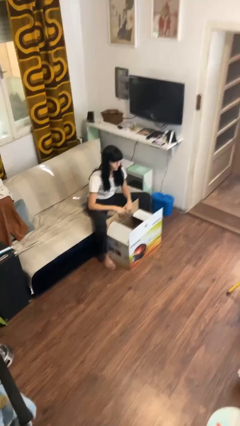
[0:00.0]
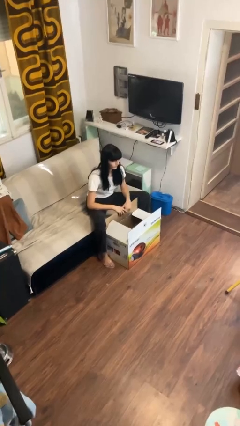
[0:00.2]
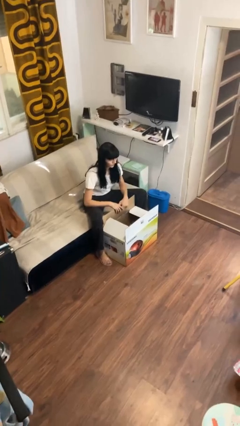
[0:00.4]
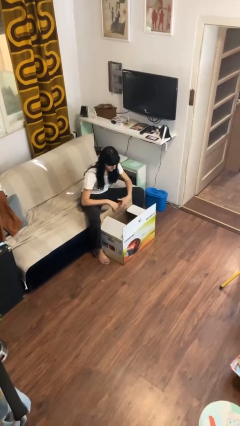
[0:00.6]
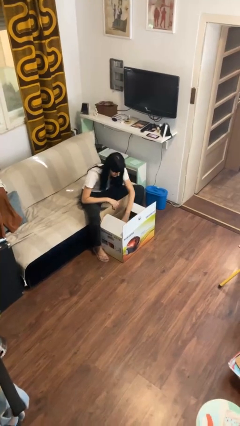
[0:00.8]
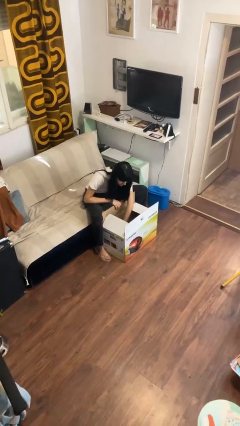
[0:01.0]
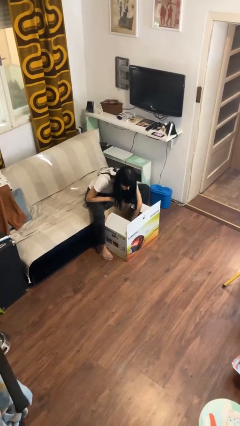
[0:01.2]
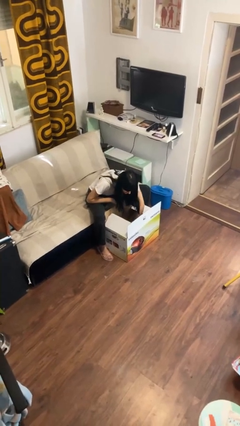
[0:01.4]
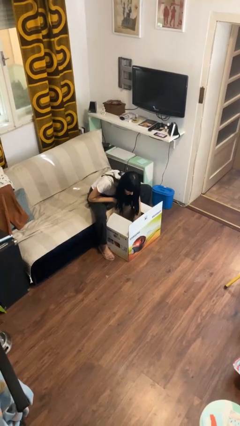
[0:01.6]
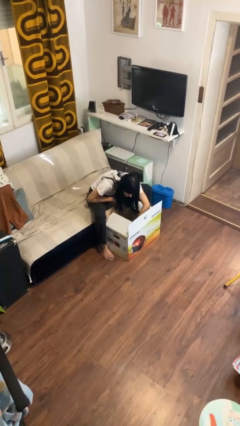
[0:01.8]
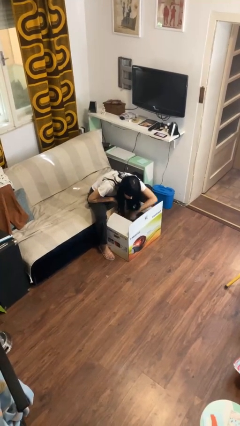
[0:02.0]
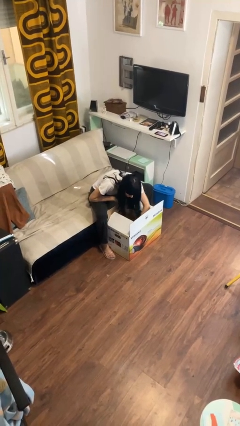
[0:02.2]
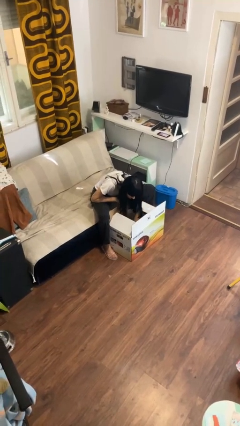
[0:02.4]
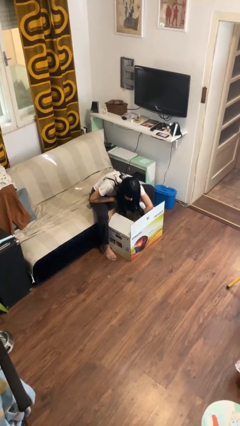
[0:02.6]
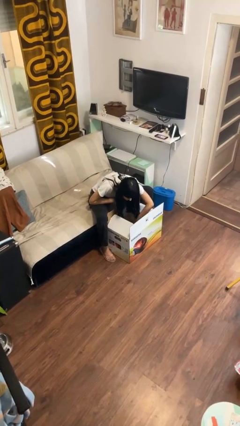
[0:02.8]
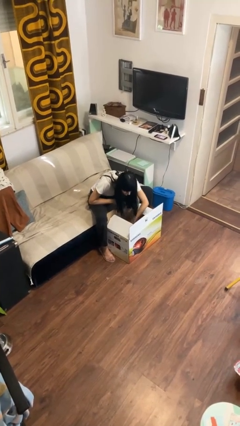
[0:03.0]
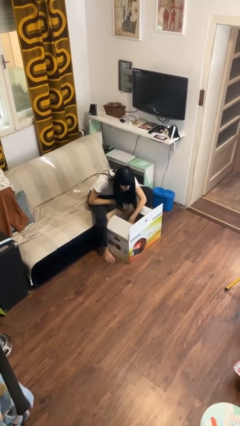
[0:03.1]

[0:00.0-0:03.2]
person searches in box

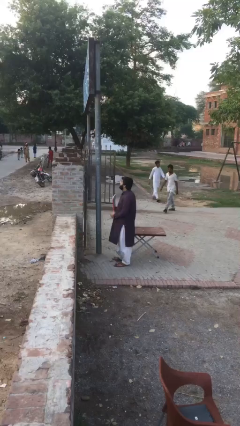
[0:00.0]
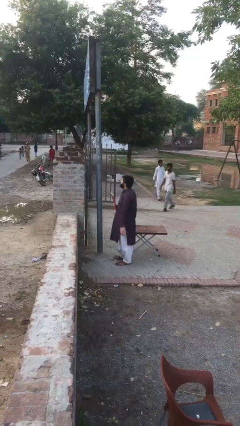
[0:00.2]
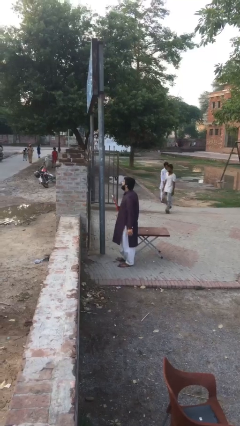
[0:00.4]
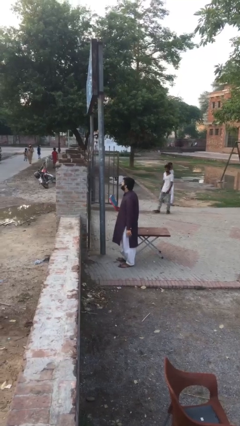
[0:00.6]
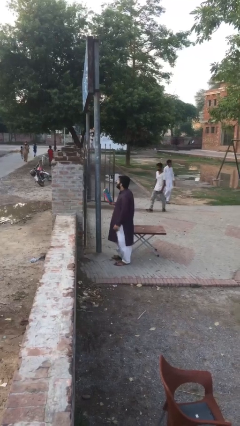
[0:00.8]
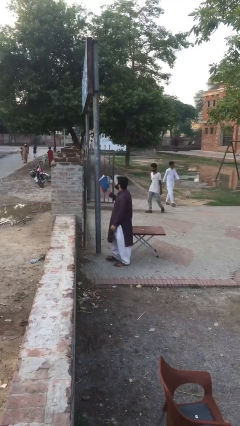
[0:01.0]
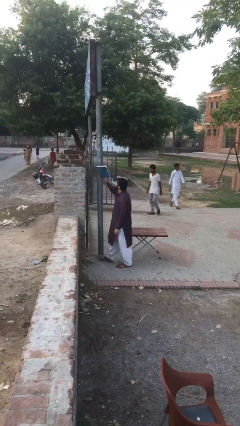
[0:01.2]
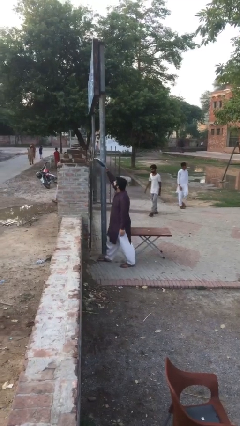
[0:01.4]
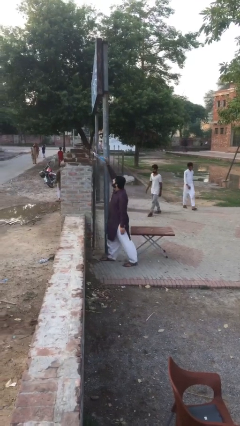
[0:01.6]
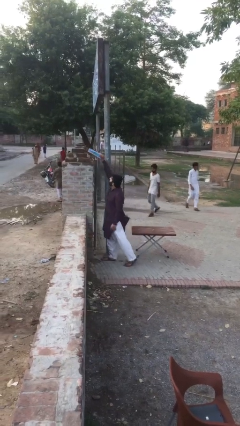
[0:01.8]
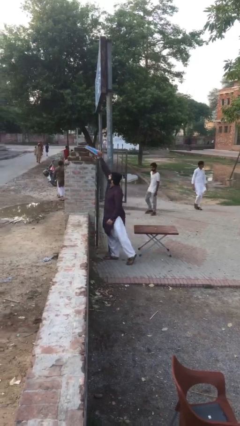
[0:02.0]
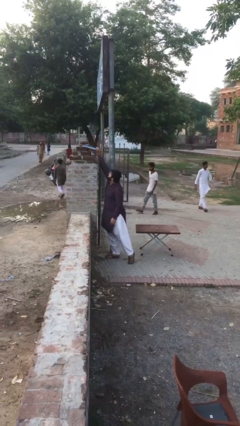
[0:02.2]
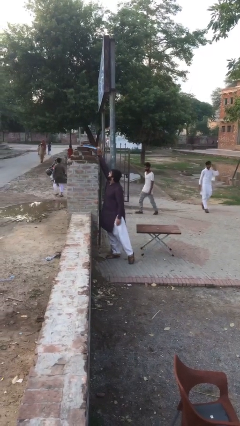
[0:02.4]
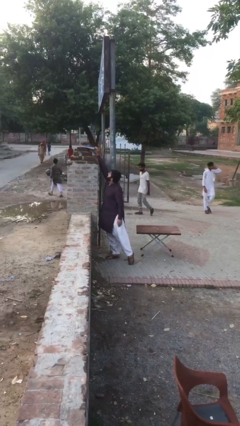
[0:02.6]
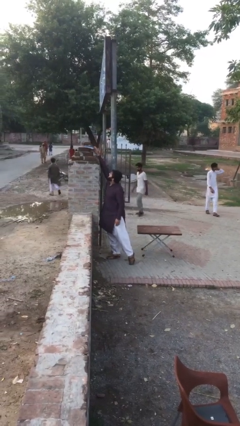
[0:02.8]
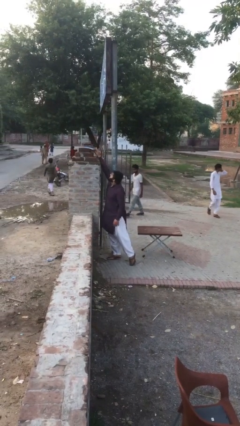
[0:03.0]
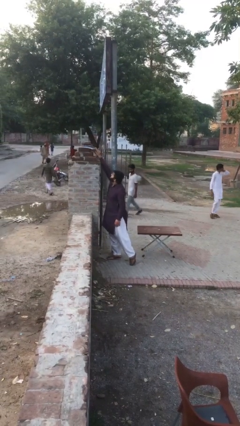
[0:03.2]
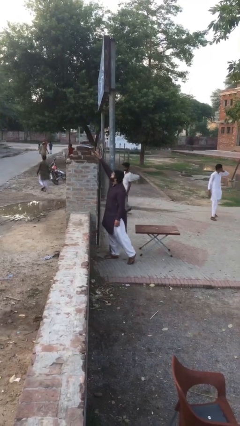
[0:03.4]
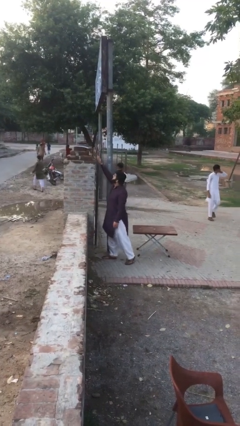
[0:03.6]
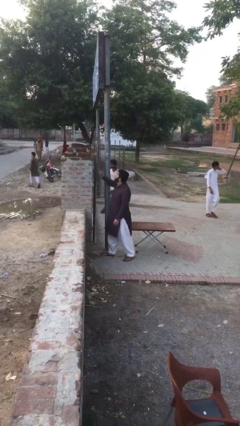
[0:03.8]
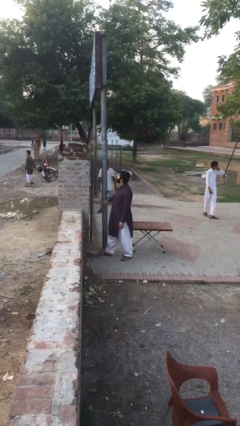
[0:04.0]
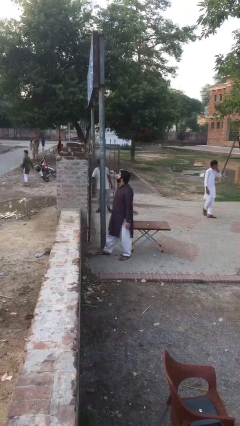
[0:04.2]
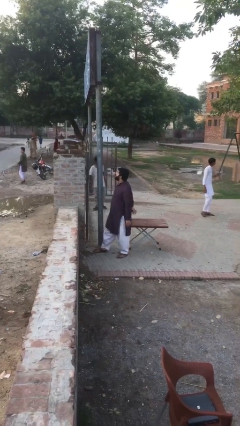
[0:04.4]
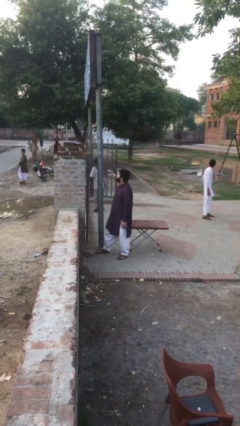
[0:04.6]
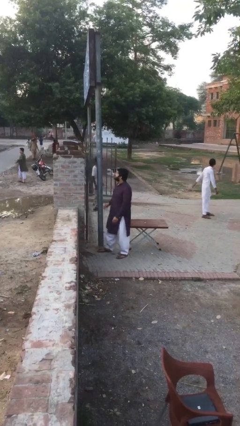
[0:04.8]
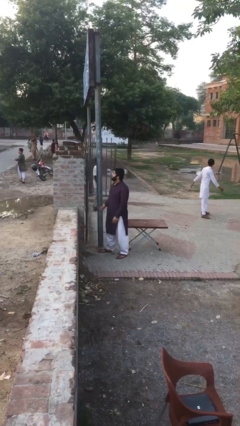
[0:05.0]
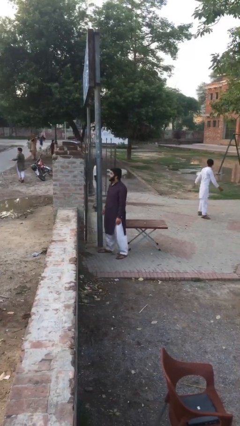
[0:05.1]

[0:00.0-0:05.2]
person puts down object on shelf

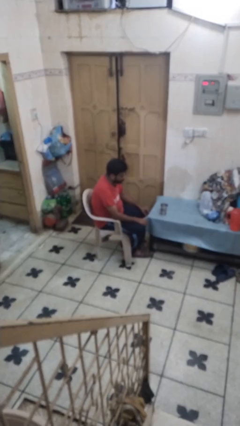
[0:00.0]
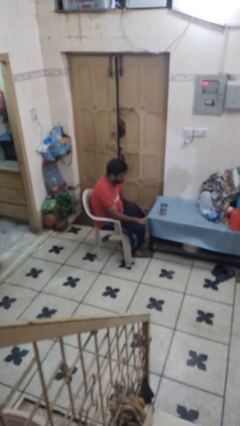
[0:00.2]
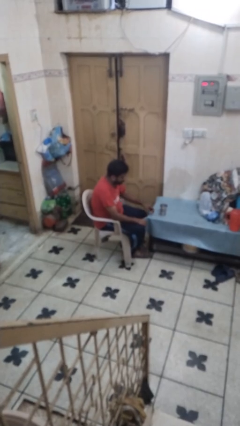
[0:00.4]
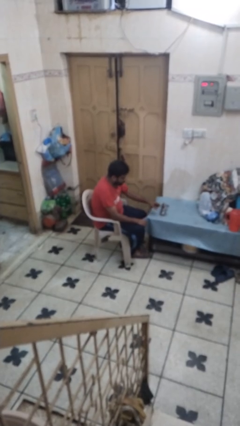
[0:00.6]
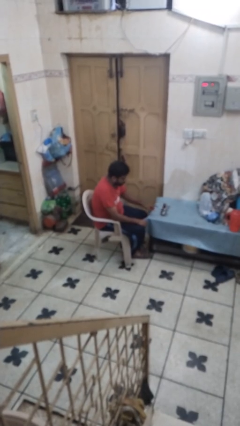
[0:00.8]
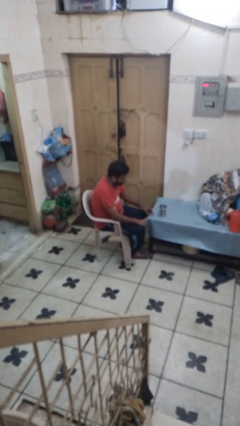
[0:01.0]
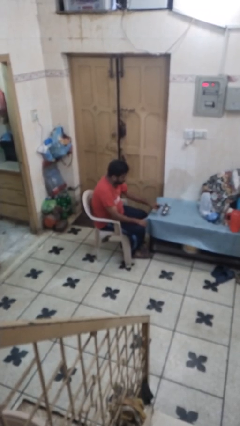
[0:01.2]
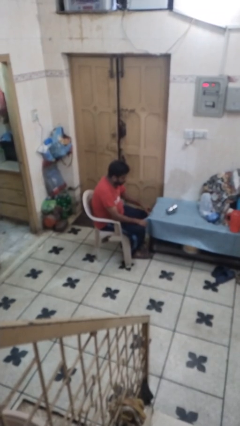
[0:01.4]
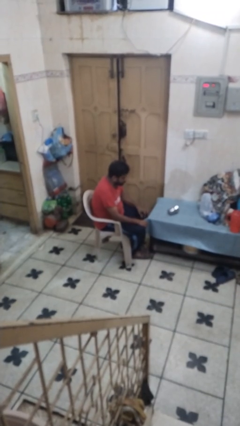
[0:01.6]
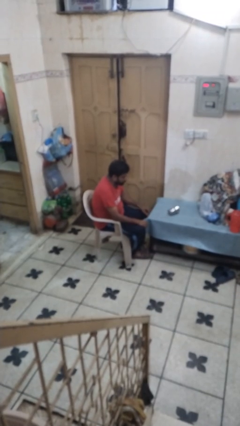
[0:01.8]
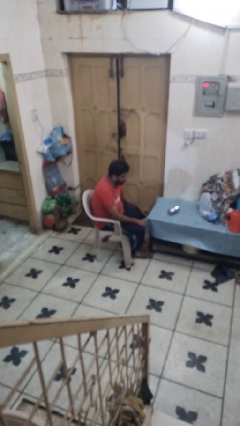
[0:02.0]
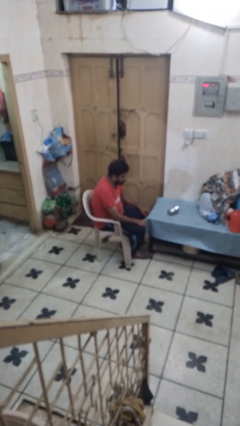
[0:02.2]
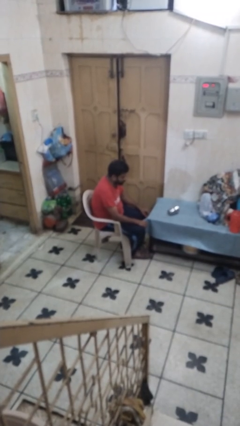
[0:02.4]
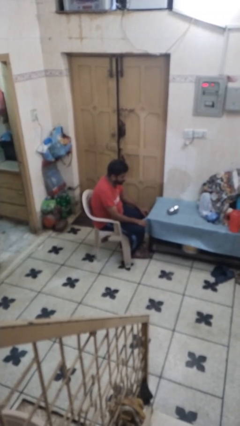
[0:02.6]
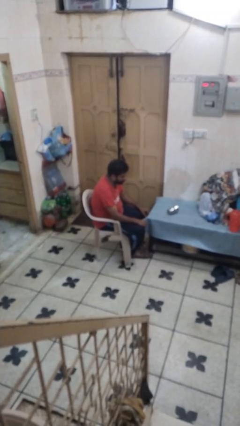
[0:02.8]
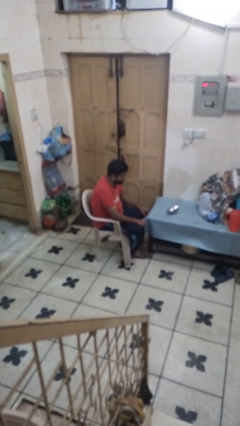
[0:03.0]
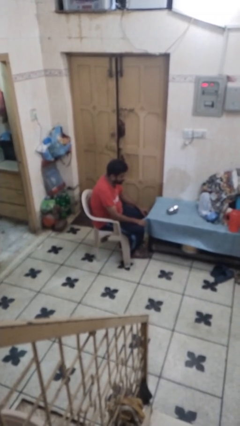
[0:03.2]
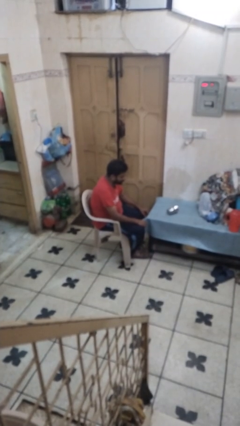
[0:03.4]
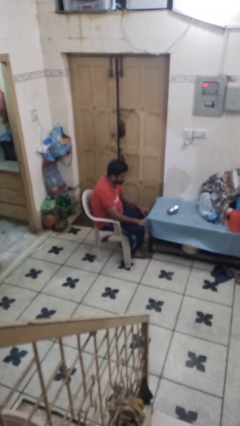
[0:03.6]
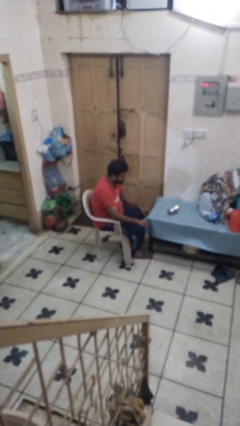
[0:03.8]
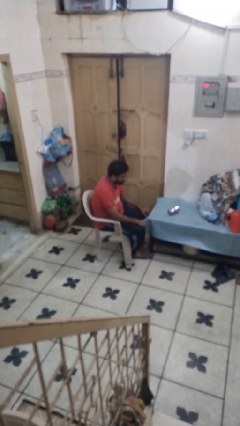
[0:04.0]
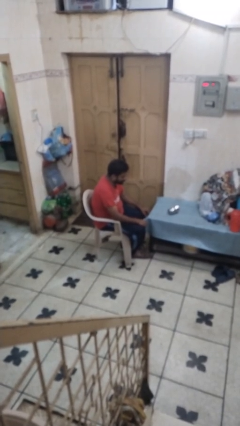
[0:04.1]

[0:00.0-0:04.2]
person knocks over glass

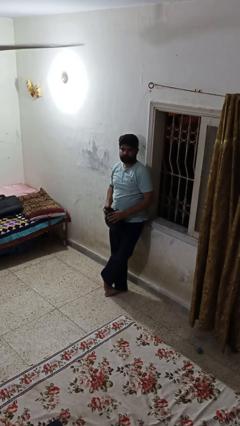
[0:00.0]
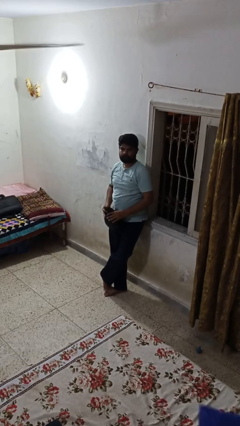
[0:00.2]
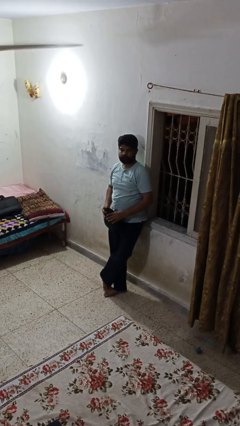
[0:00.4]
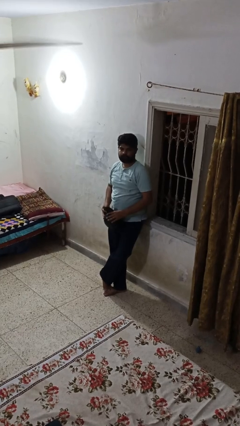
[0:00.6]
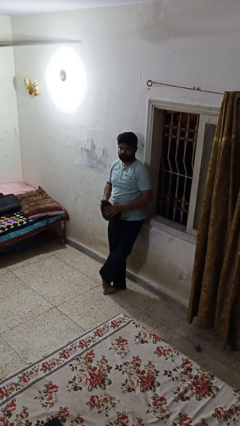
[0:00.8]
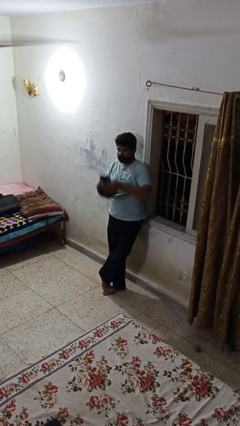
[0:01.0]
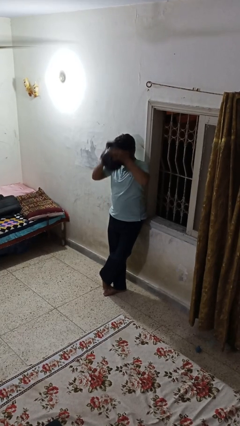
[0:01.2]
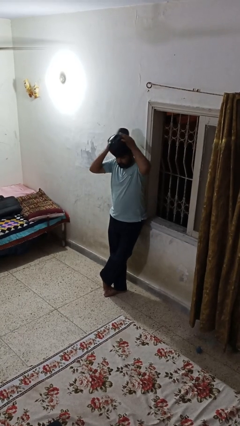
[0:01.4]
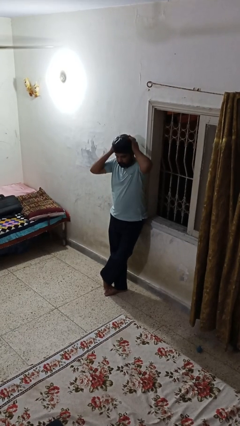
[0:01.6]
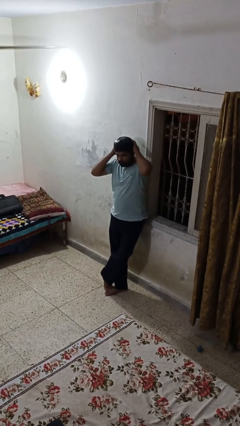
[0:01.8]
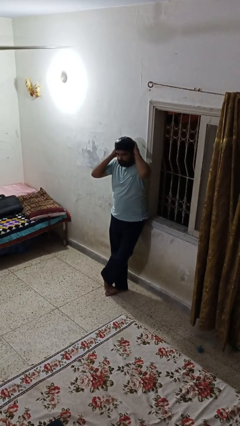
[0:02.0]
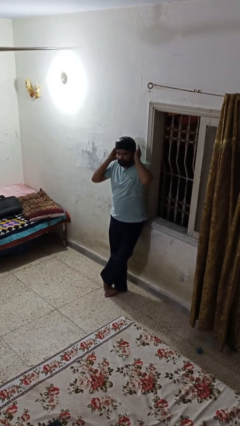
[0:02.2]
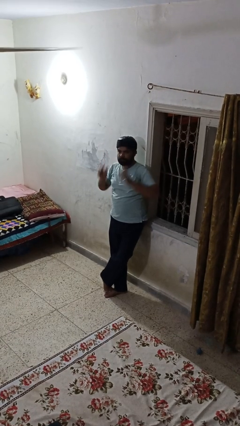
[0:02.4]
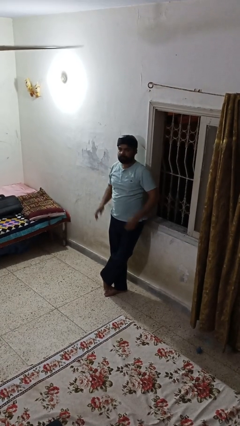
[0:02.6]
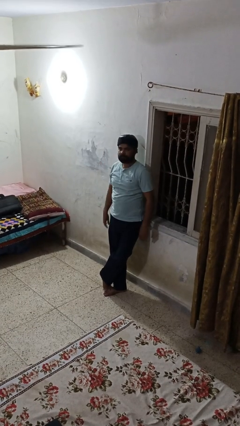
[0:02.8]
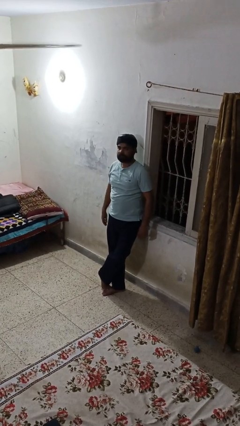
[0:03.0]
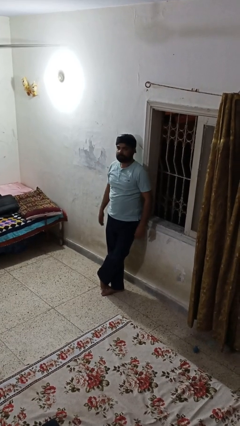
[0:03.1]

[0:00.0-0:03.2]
person puts on hat

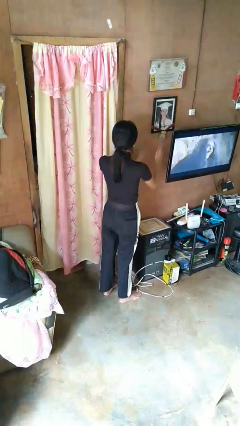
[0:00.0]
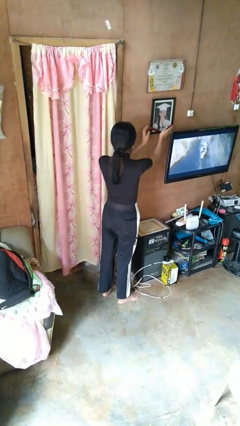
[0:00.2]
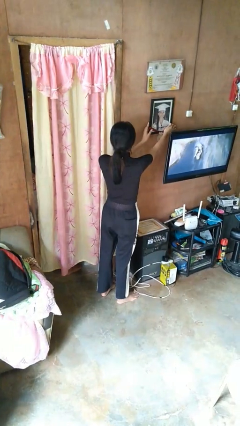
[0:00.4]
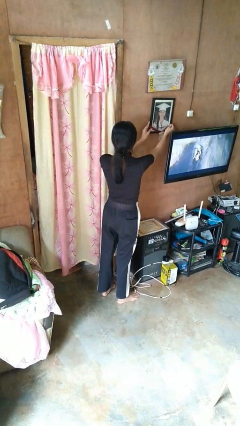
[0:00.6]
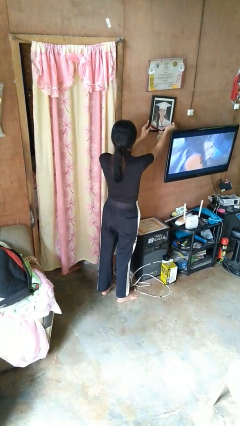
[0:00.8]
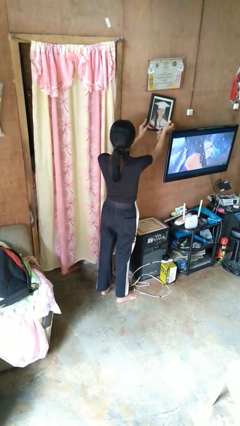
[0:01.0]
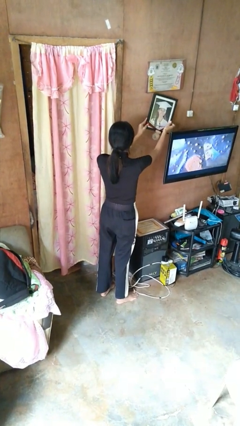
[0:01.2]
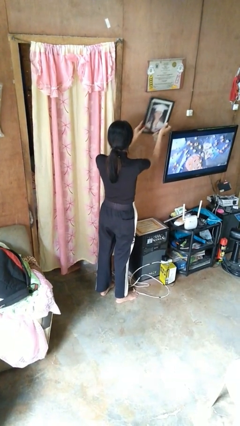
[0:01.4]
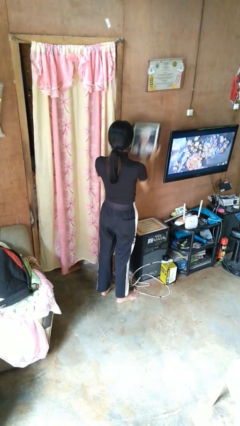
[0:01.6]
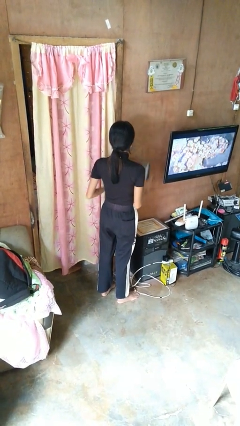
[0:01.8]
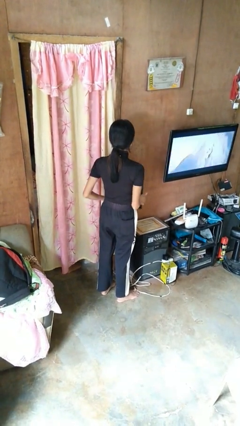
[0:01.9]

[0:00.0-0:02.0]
person takes down picture frame
